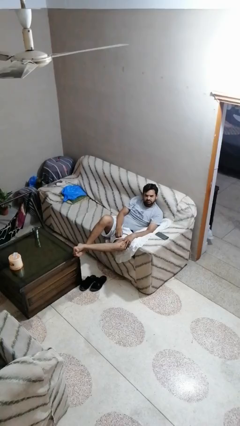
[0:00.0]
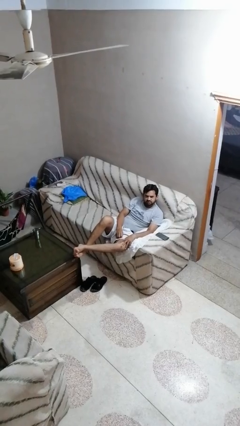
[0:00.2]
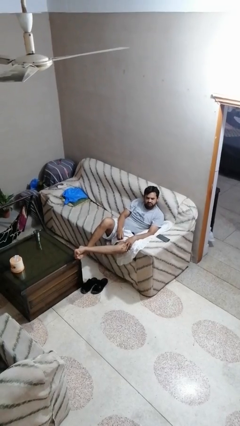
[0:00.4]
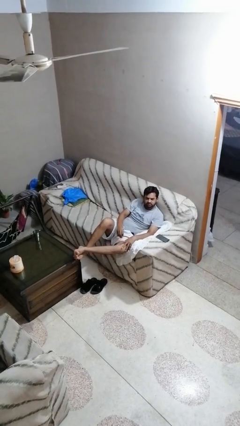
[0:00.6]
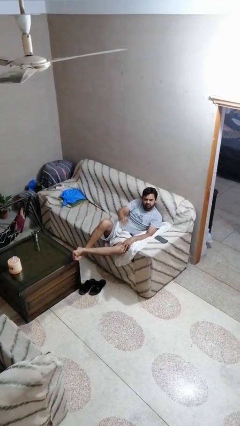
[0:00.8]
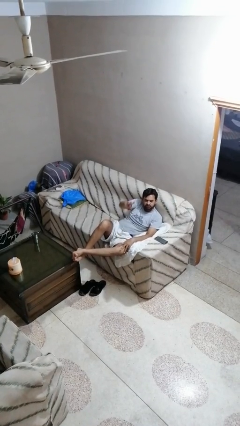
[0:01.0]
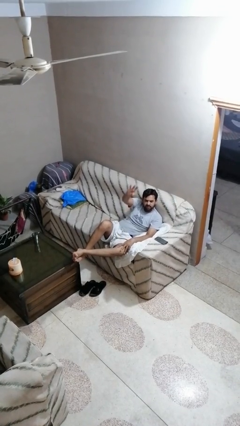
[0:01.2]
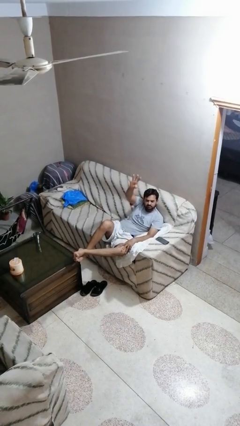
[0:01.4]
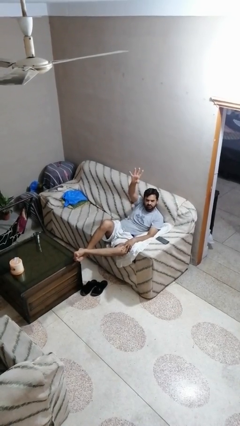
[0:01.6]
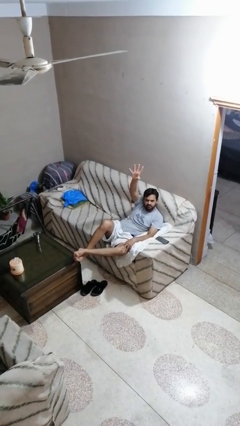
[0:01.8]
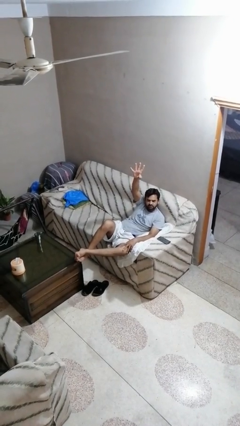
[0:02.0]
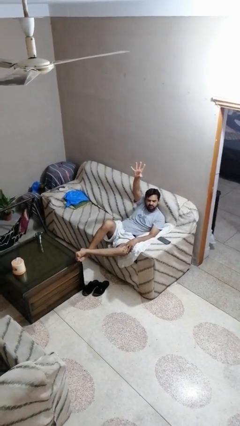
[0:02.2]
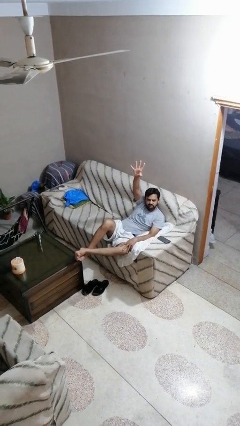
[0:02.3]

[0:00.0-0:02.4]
person gestures number four

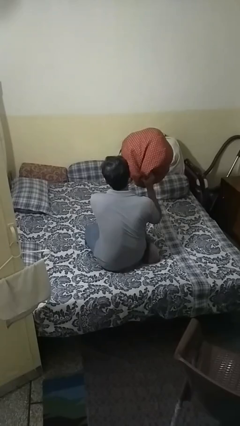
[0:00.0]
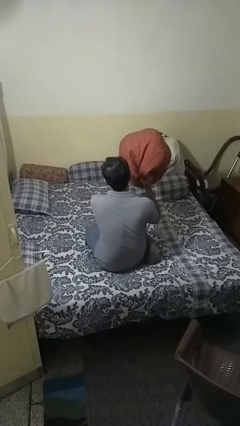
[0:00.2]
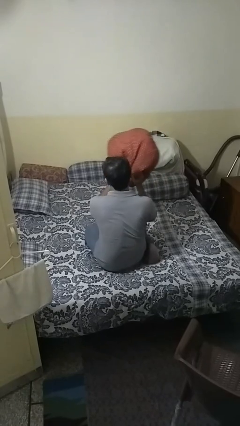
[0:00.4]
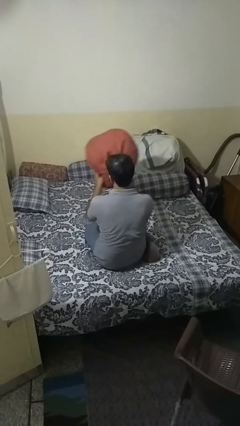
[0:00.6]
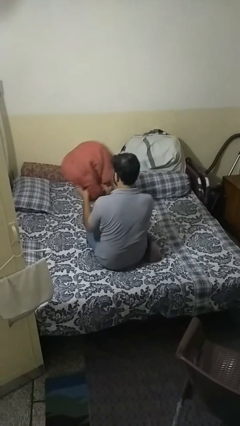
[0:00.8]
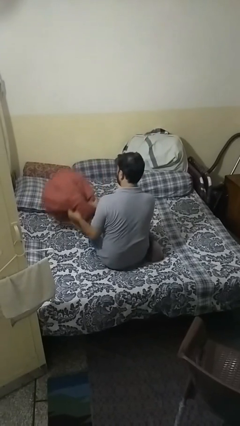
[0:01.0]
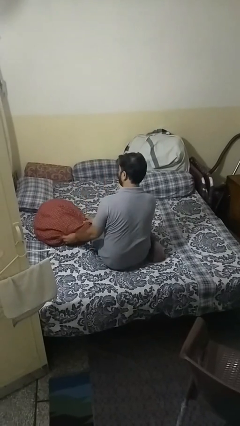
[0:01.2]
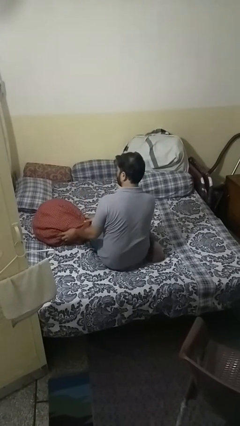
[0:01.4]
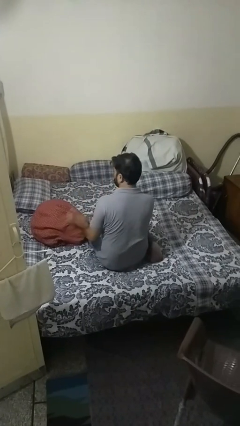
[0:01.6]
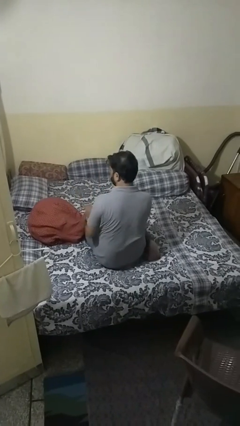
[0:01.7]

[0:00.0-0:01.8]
person puts down object on bed

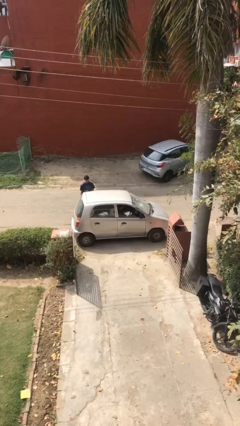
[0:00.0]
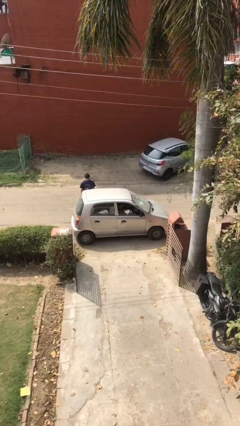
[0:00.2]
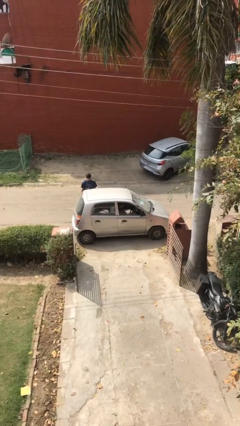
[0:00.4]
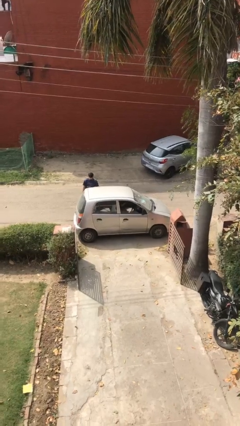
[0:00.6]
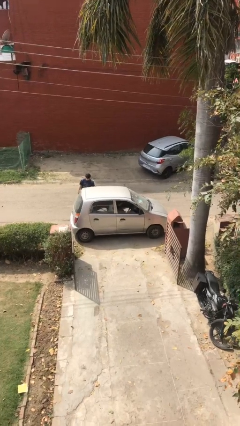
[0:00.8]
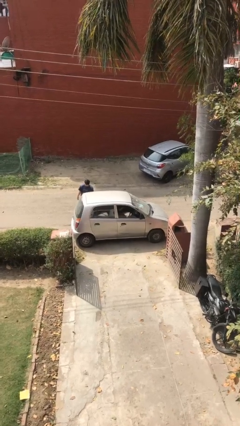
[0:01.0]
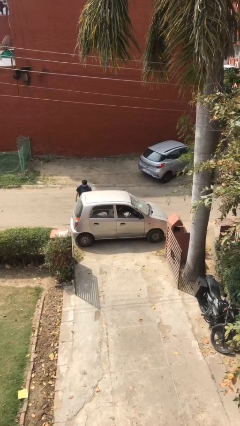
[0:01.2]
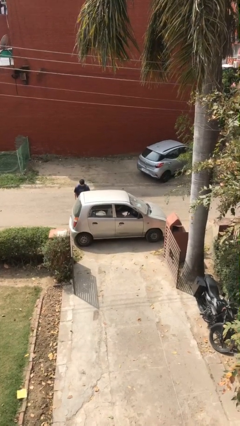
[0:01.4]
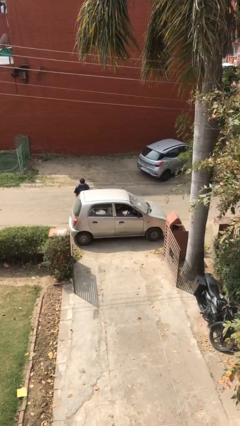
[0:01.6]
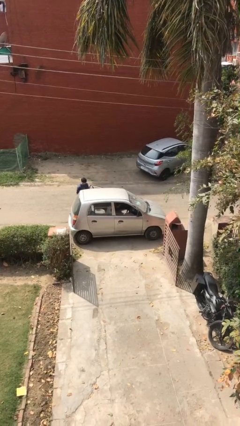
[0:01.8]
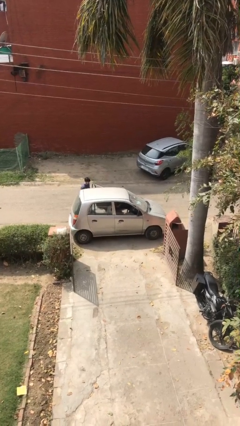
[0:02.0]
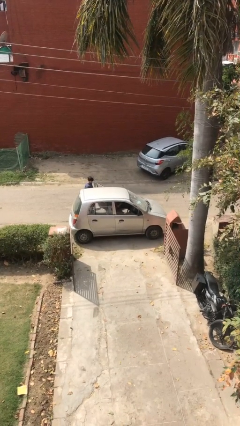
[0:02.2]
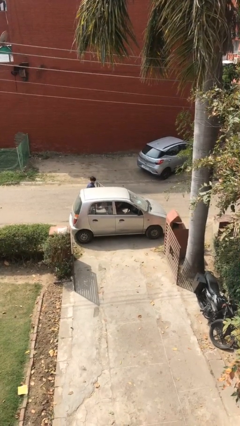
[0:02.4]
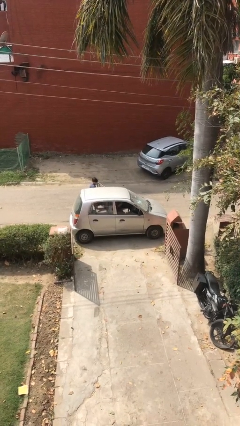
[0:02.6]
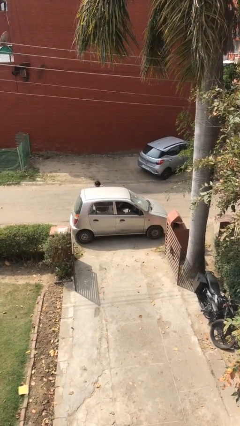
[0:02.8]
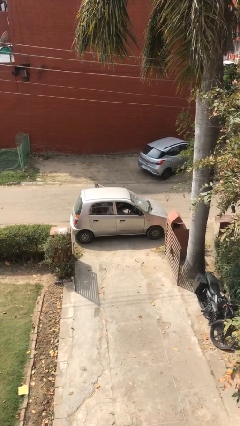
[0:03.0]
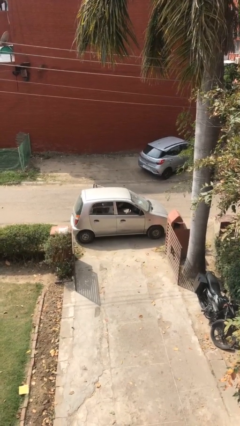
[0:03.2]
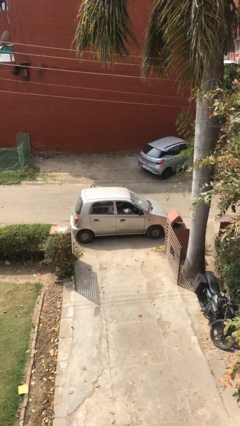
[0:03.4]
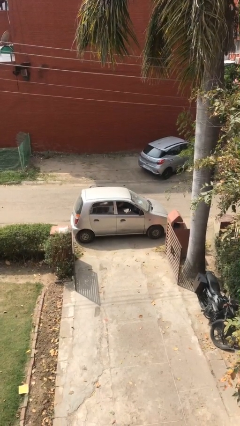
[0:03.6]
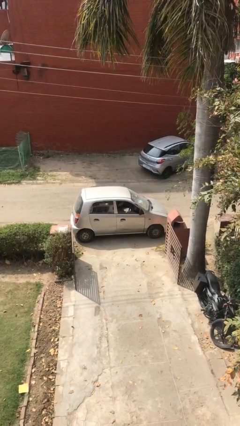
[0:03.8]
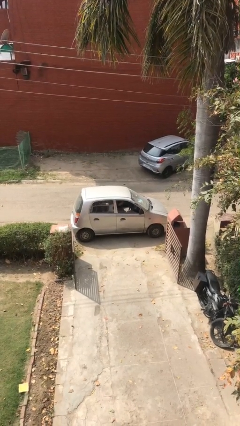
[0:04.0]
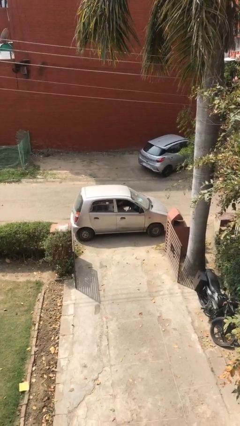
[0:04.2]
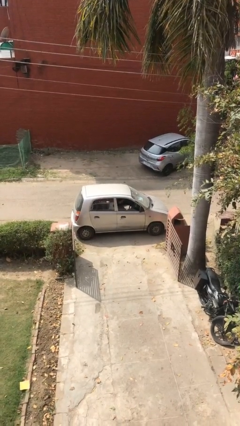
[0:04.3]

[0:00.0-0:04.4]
car picks up person

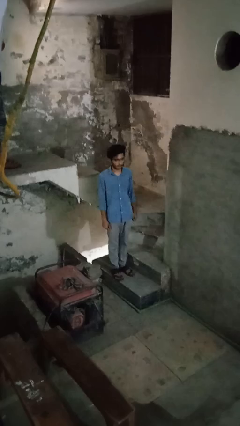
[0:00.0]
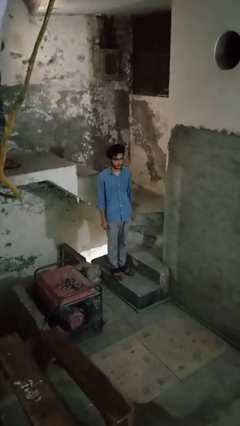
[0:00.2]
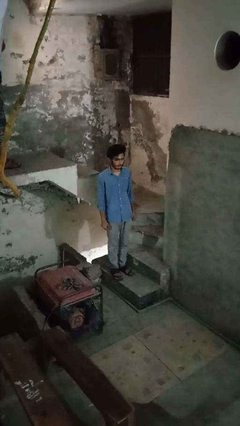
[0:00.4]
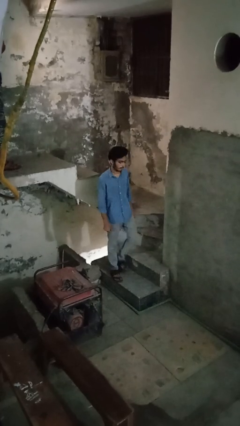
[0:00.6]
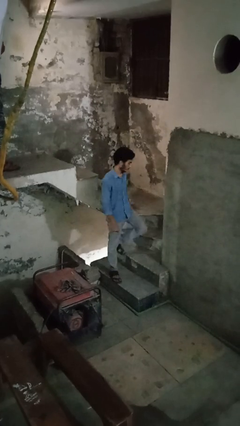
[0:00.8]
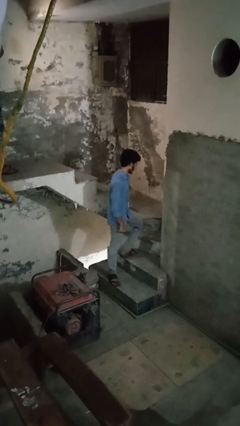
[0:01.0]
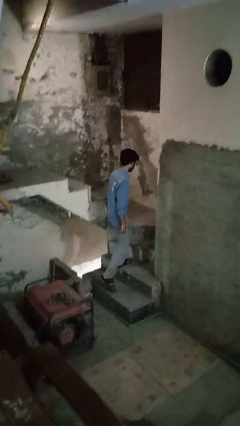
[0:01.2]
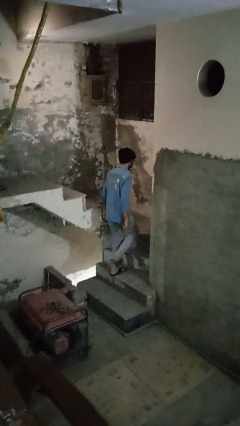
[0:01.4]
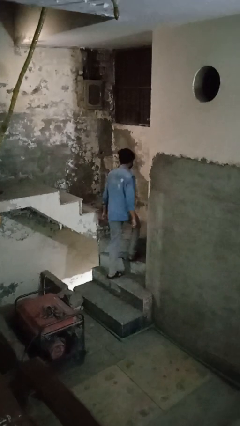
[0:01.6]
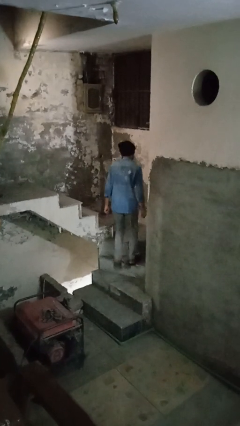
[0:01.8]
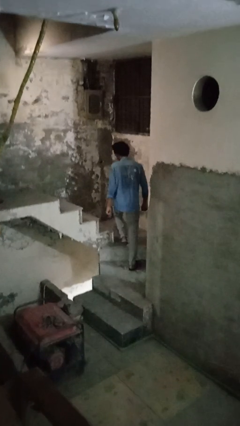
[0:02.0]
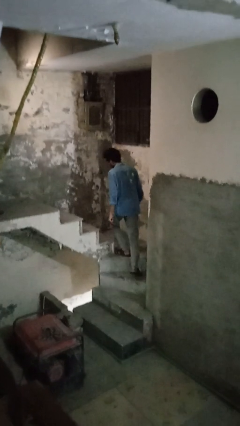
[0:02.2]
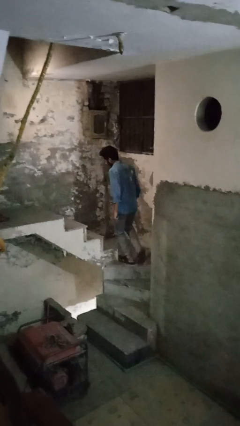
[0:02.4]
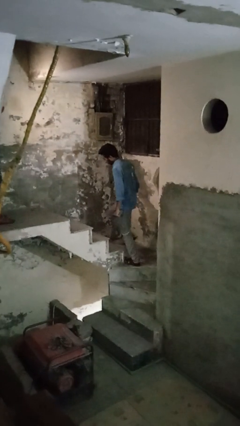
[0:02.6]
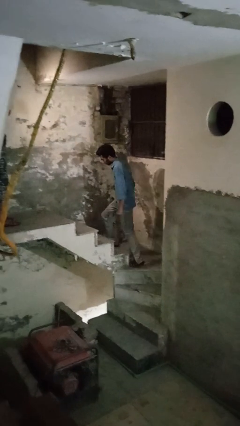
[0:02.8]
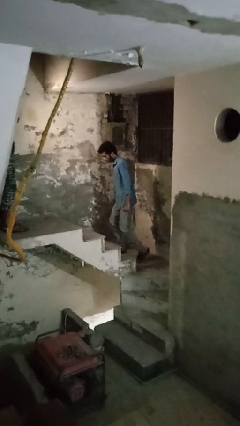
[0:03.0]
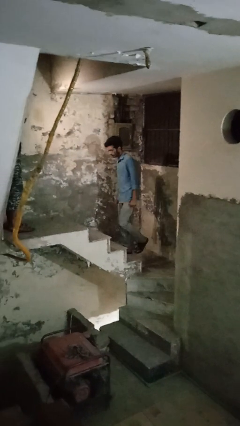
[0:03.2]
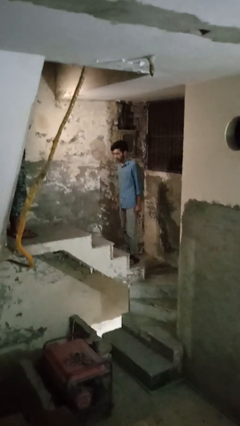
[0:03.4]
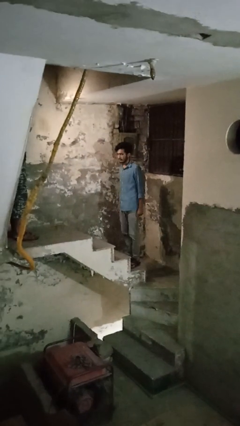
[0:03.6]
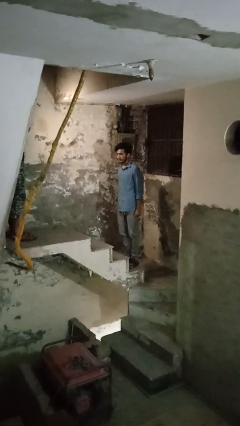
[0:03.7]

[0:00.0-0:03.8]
person climbs up stairs

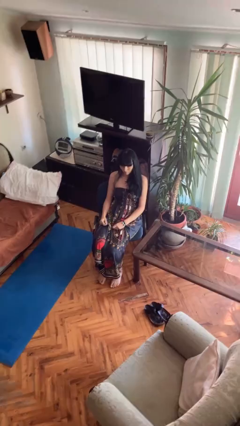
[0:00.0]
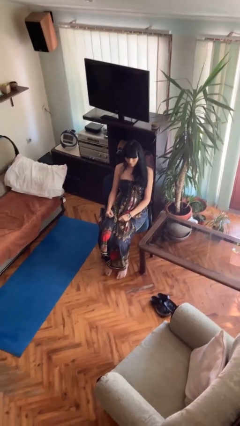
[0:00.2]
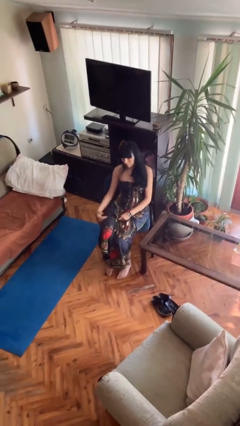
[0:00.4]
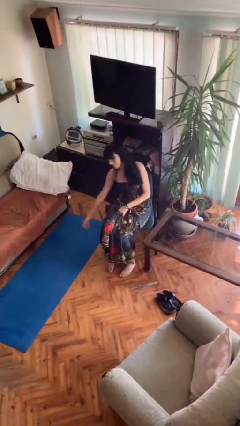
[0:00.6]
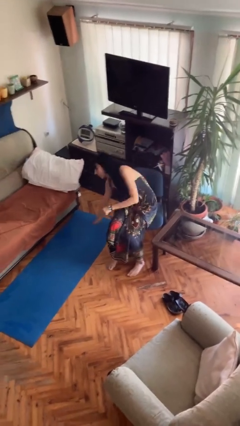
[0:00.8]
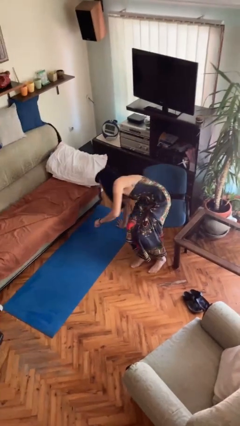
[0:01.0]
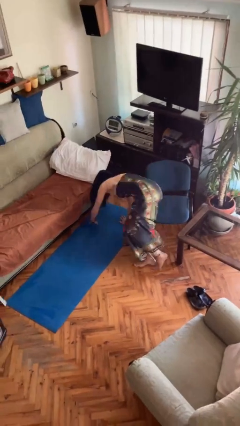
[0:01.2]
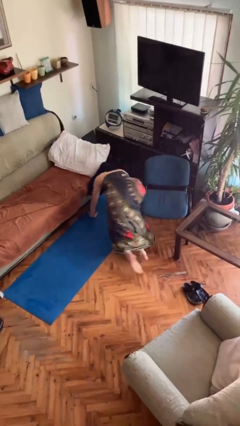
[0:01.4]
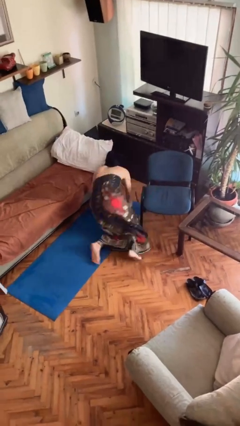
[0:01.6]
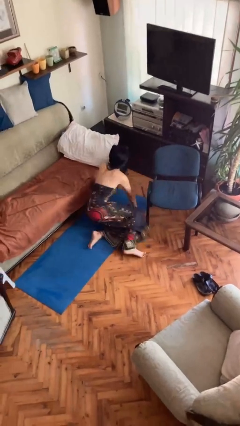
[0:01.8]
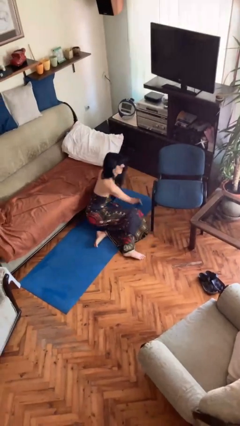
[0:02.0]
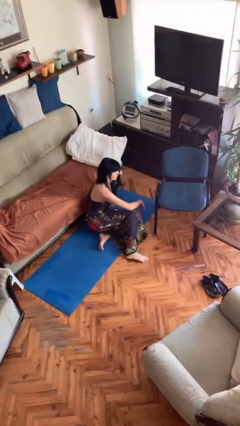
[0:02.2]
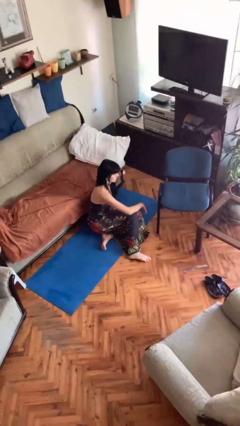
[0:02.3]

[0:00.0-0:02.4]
person falls from chair

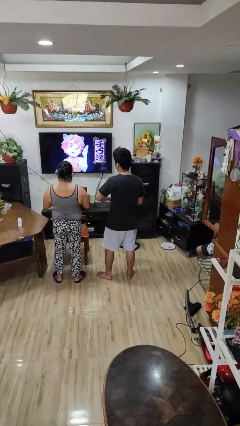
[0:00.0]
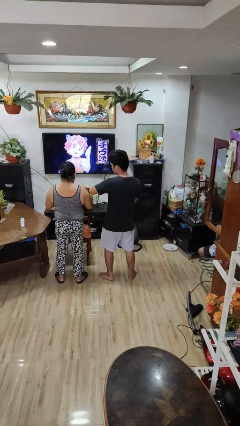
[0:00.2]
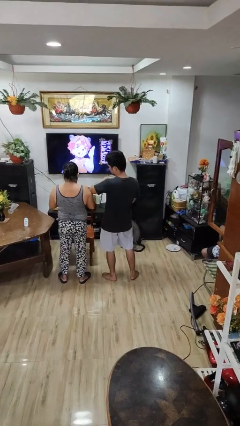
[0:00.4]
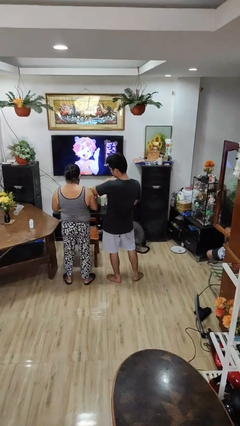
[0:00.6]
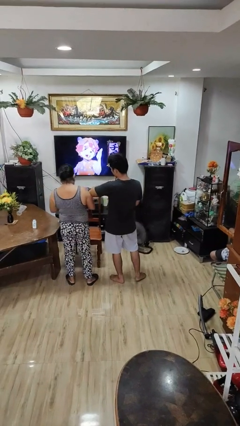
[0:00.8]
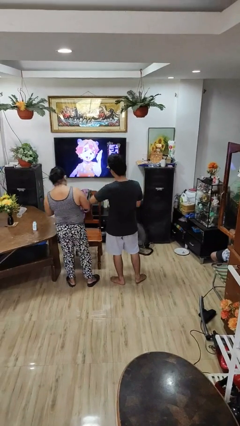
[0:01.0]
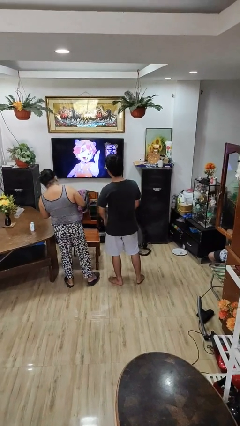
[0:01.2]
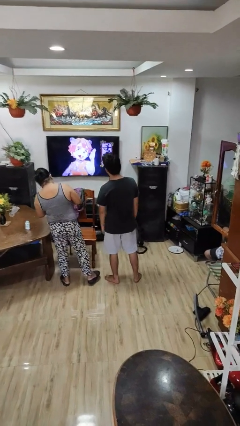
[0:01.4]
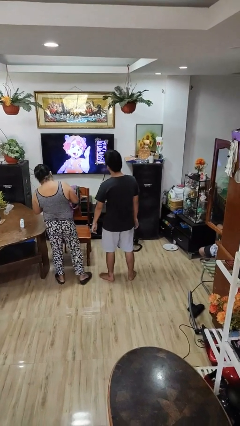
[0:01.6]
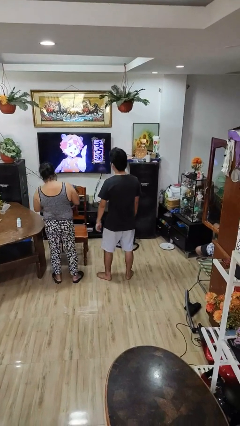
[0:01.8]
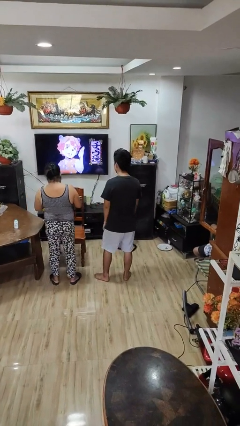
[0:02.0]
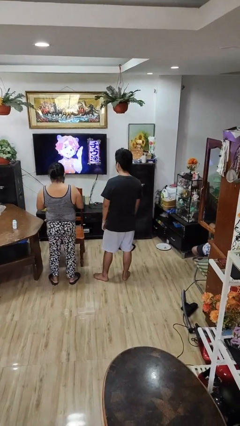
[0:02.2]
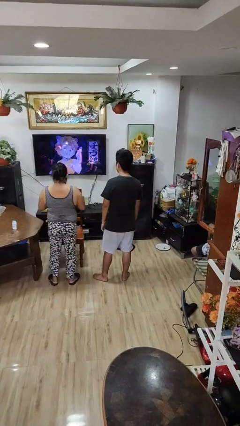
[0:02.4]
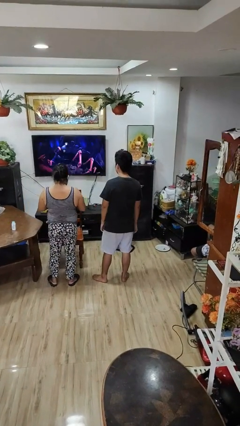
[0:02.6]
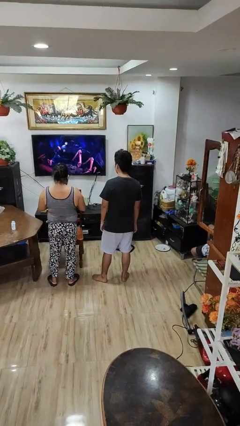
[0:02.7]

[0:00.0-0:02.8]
person shoves person
